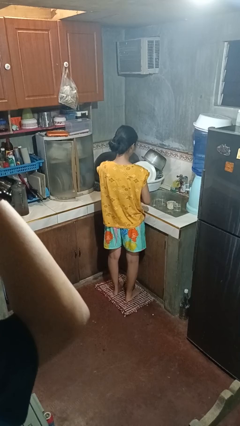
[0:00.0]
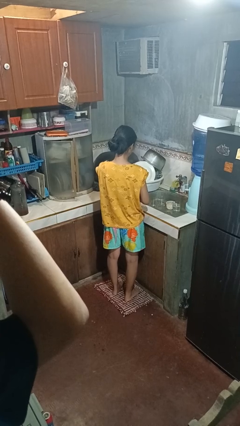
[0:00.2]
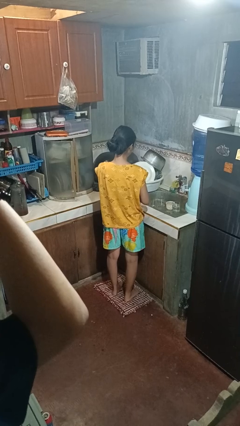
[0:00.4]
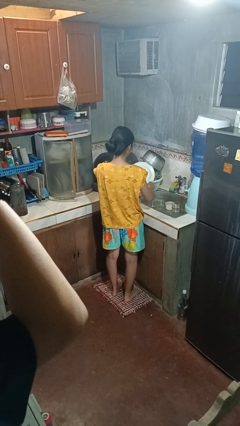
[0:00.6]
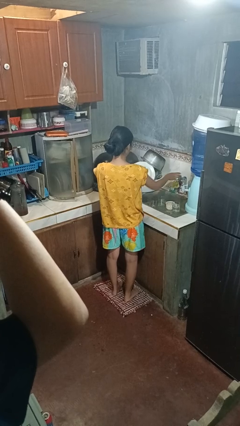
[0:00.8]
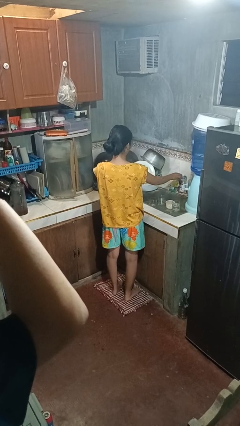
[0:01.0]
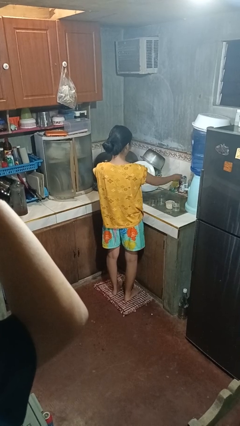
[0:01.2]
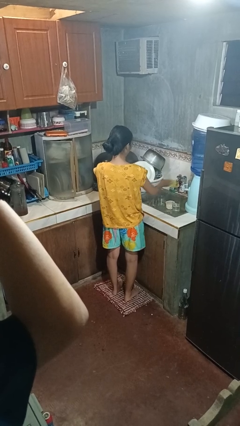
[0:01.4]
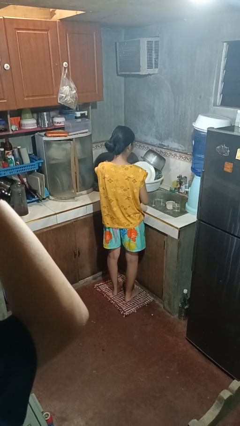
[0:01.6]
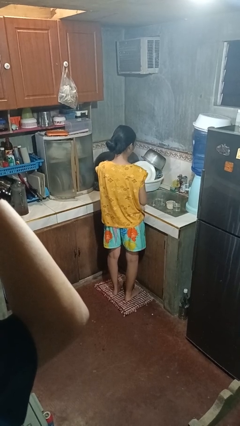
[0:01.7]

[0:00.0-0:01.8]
person turns on faucet

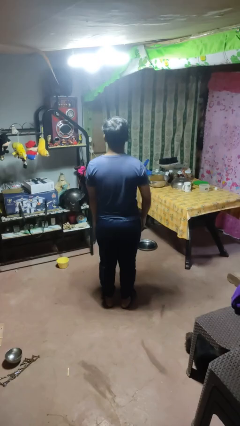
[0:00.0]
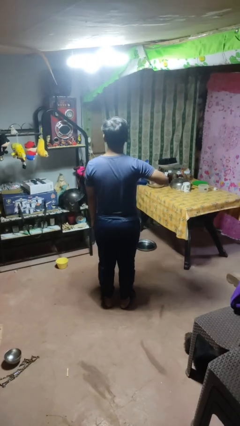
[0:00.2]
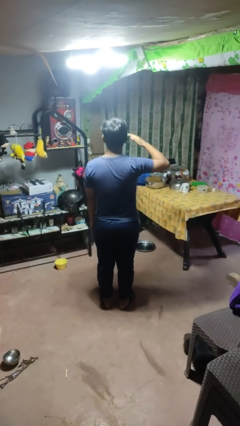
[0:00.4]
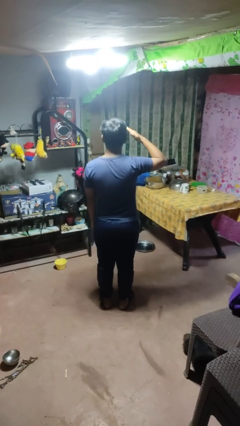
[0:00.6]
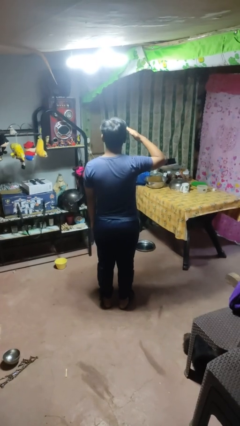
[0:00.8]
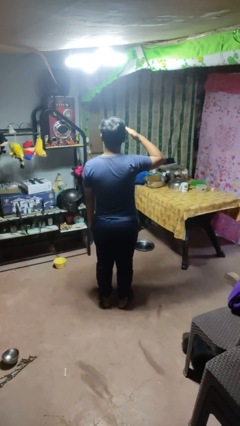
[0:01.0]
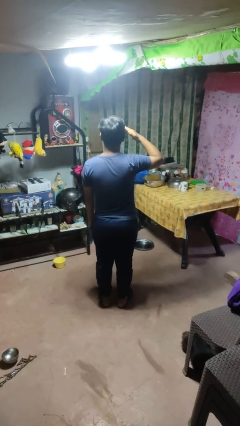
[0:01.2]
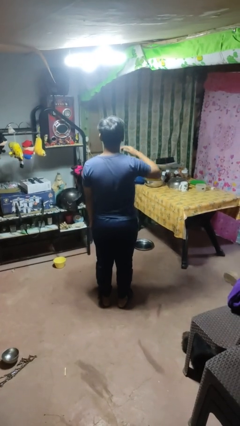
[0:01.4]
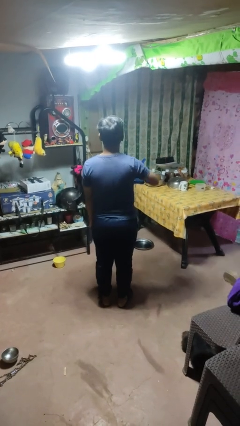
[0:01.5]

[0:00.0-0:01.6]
person salutes

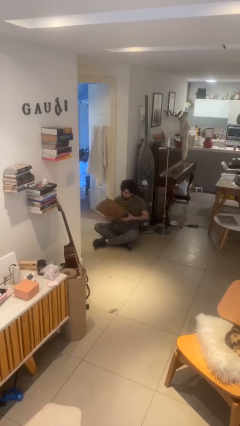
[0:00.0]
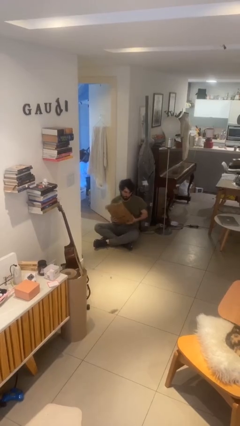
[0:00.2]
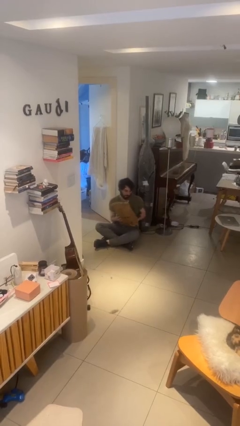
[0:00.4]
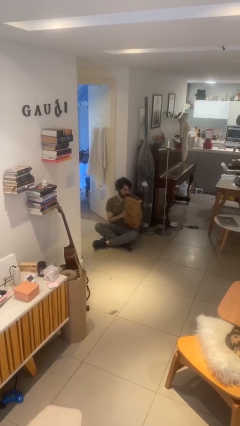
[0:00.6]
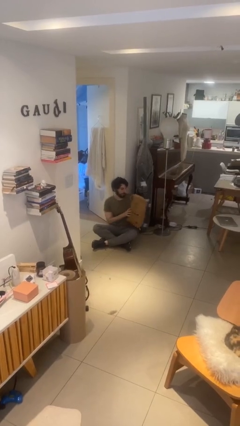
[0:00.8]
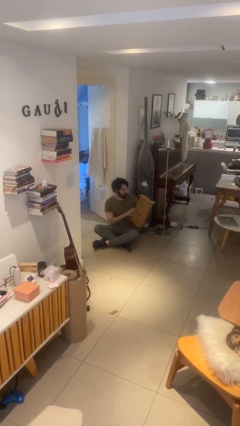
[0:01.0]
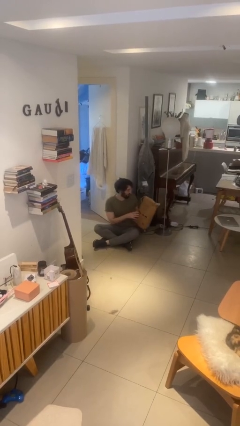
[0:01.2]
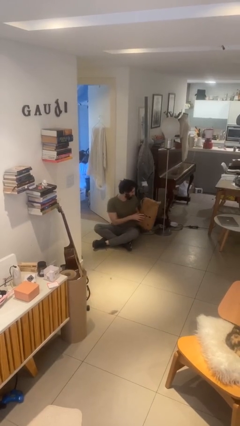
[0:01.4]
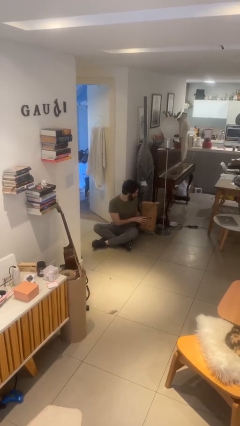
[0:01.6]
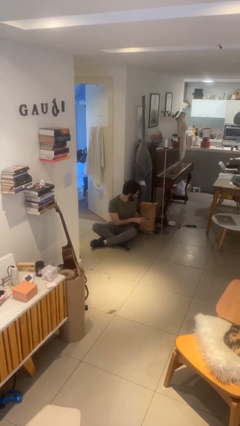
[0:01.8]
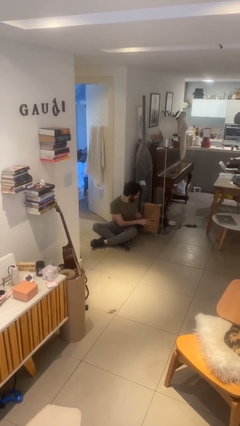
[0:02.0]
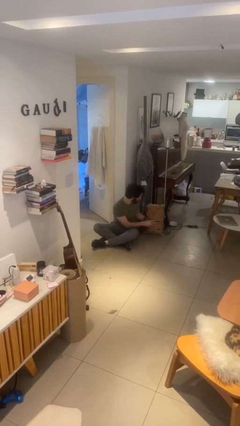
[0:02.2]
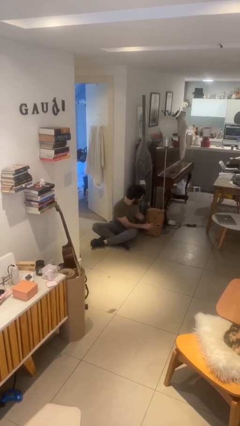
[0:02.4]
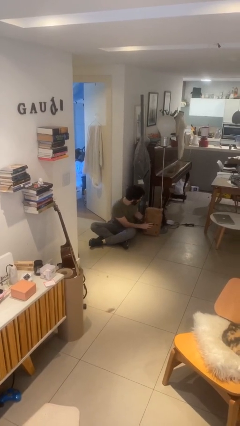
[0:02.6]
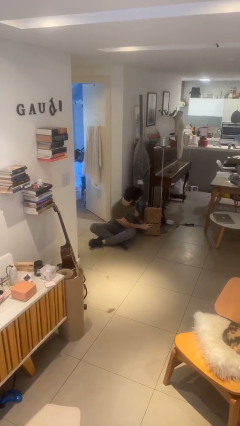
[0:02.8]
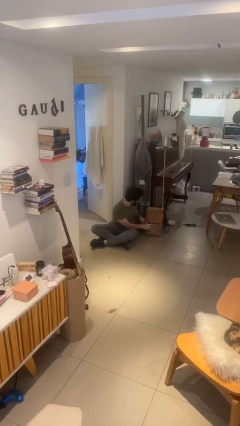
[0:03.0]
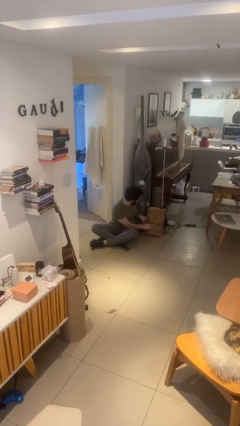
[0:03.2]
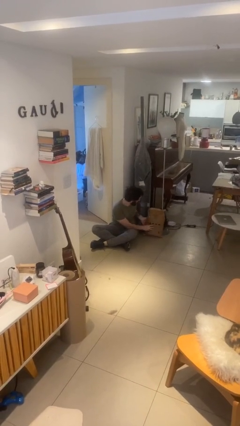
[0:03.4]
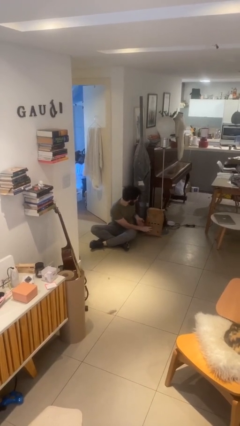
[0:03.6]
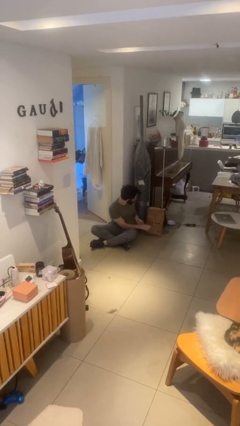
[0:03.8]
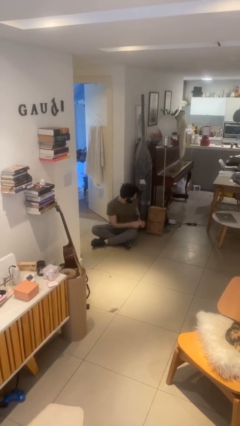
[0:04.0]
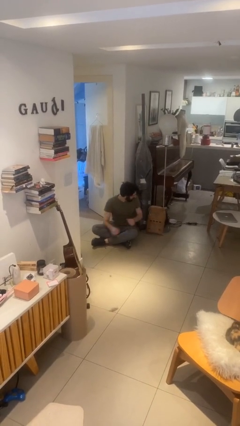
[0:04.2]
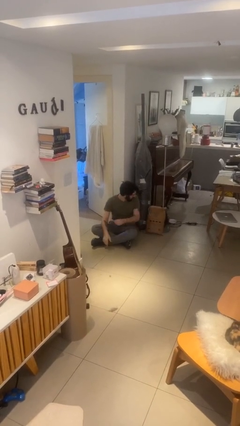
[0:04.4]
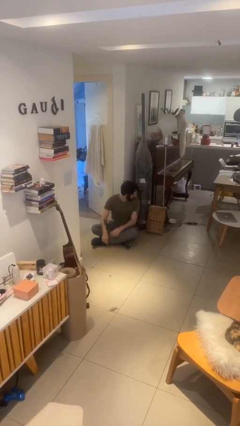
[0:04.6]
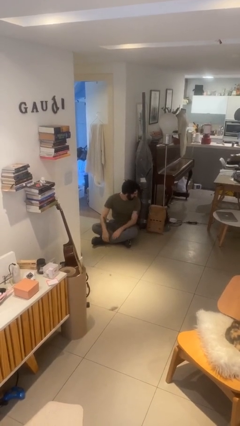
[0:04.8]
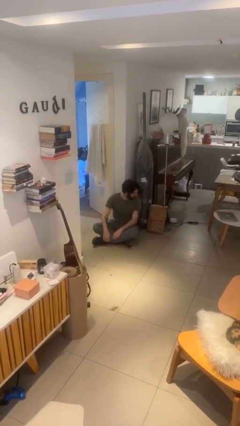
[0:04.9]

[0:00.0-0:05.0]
person puts down object on floor

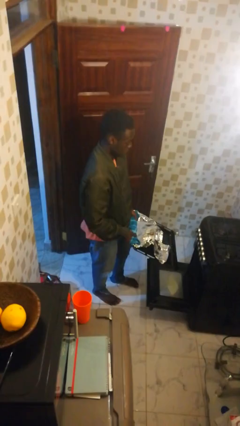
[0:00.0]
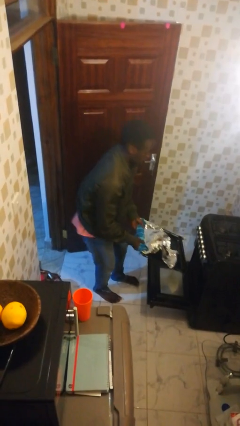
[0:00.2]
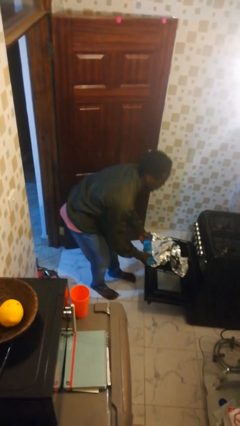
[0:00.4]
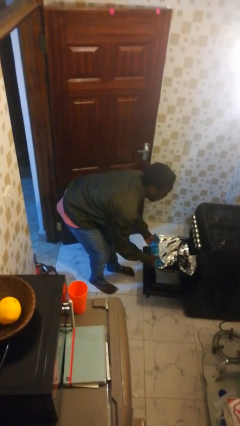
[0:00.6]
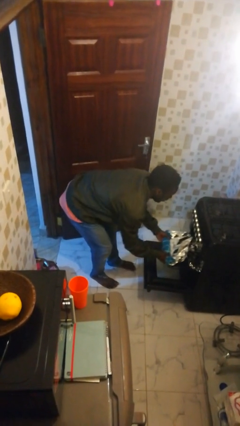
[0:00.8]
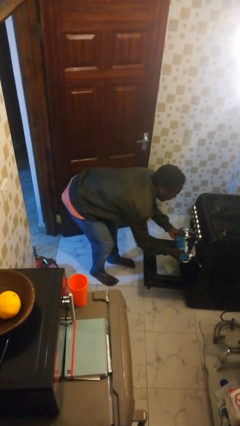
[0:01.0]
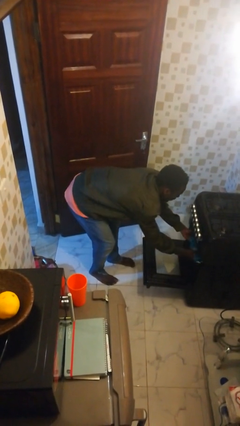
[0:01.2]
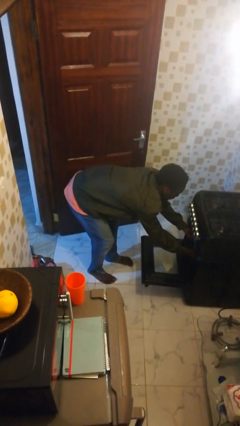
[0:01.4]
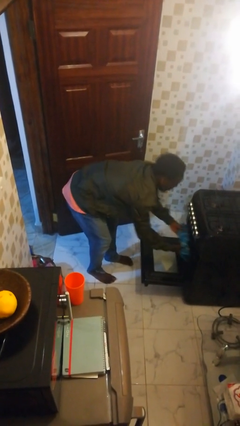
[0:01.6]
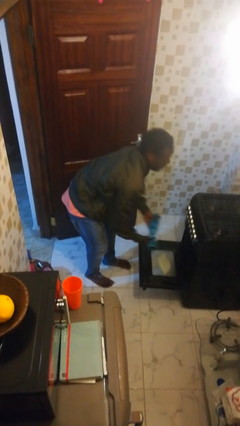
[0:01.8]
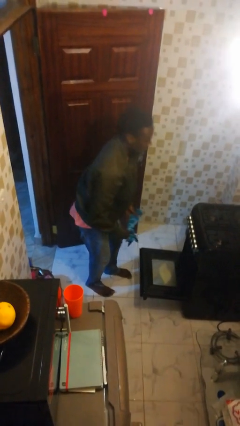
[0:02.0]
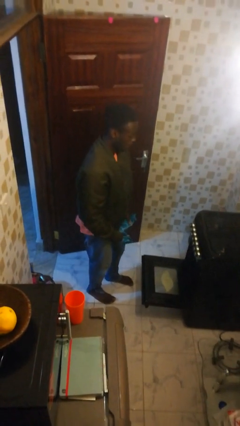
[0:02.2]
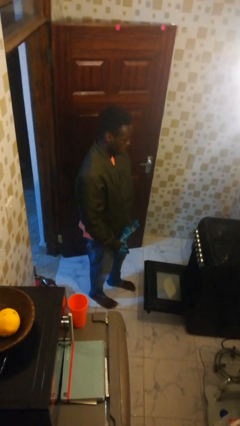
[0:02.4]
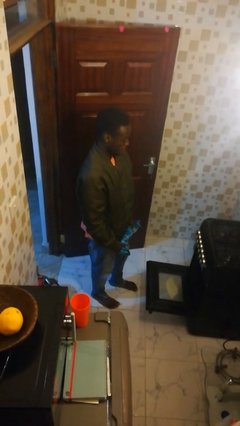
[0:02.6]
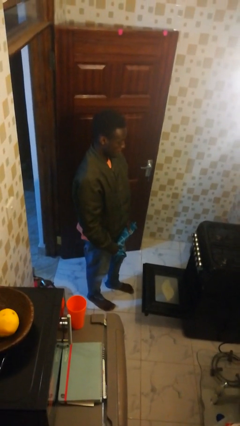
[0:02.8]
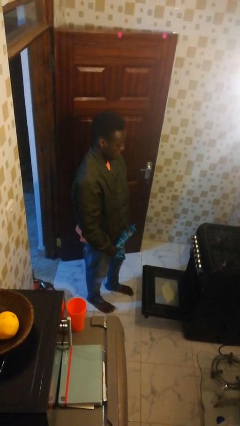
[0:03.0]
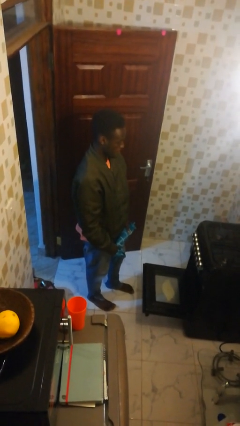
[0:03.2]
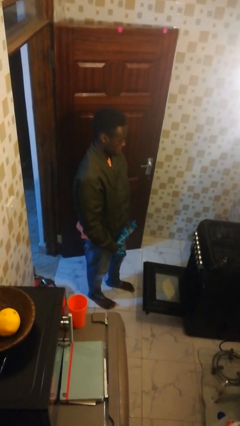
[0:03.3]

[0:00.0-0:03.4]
person puts object into oven

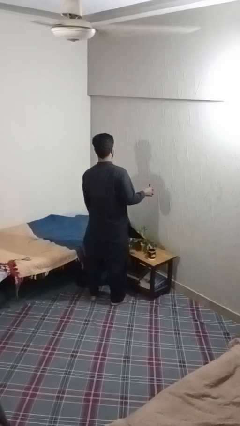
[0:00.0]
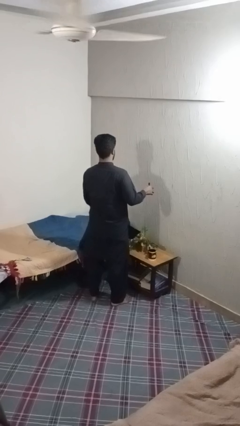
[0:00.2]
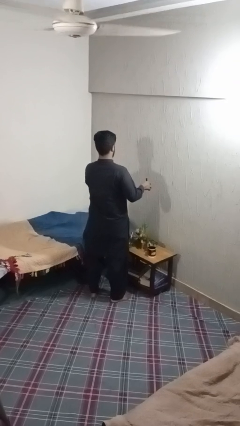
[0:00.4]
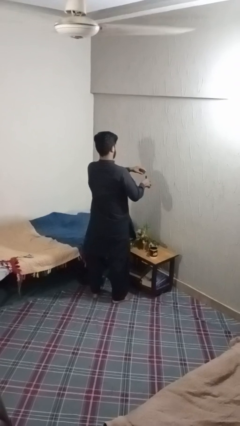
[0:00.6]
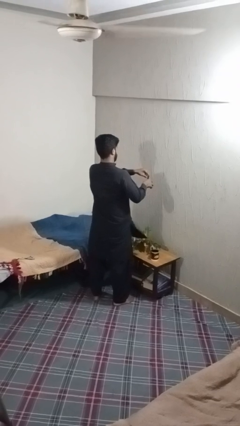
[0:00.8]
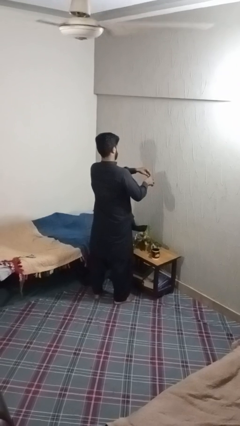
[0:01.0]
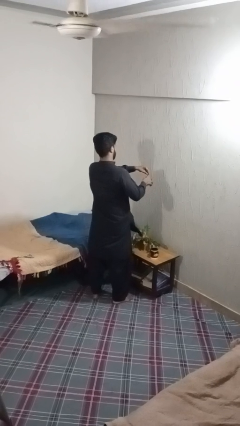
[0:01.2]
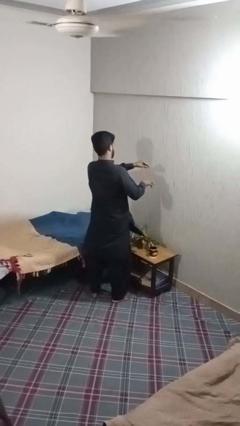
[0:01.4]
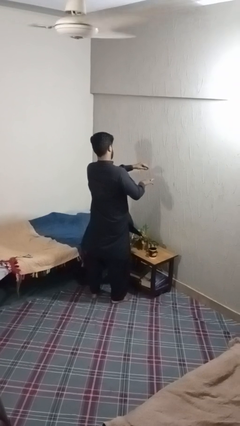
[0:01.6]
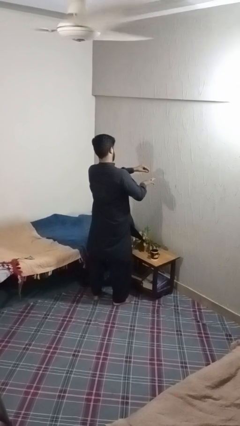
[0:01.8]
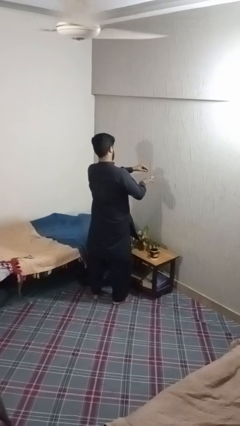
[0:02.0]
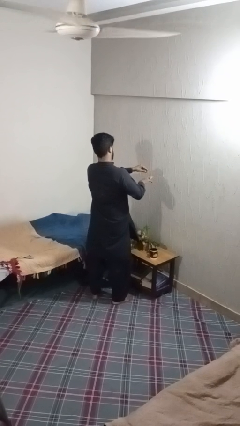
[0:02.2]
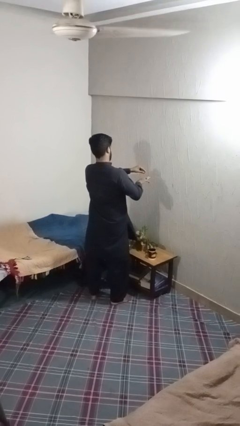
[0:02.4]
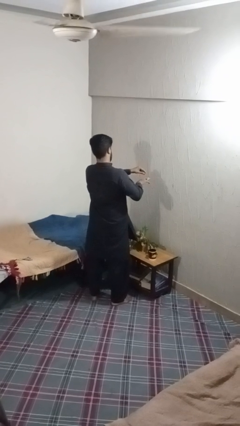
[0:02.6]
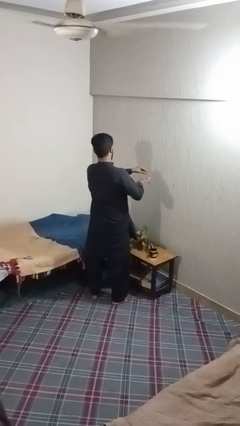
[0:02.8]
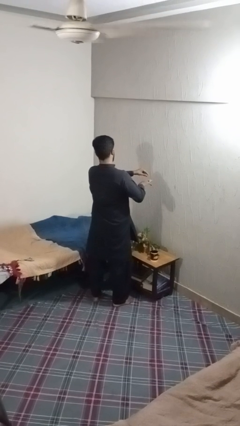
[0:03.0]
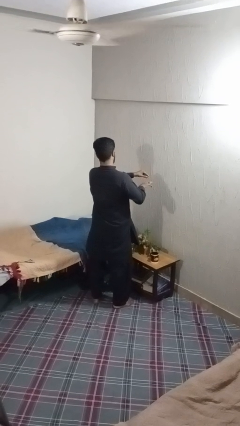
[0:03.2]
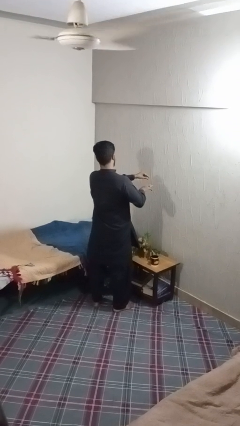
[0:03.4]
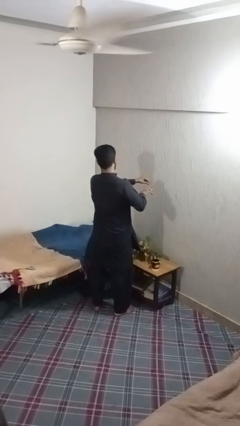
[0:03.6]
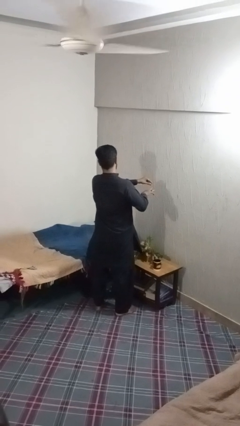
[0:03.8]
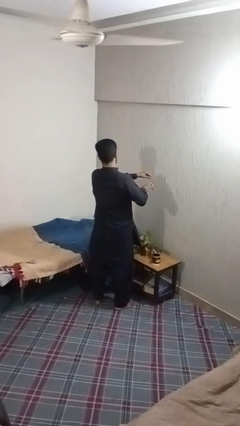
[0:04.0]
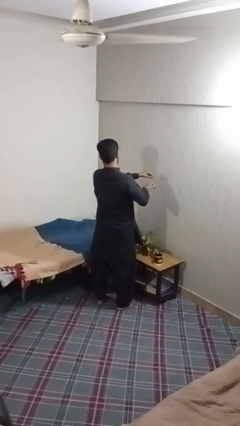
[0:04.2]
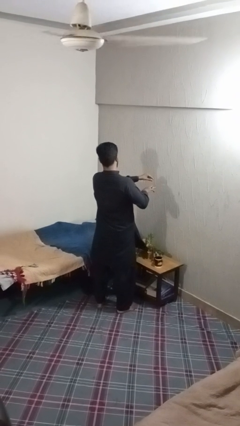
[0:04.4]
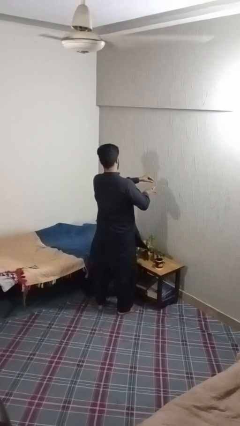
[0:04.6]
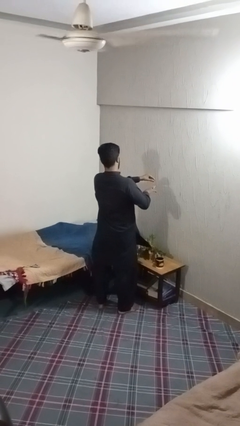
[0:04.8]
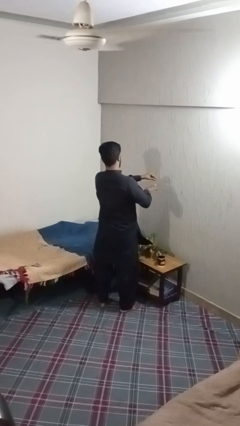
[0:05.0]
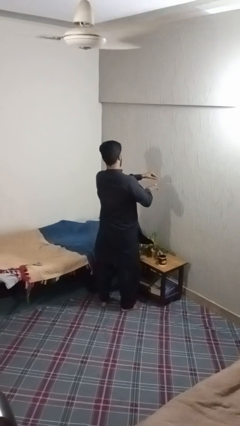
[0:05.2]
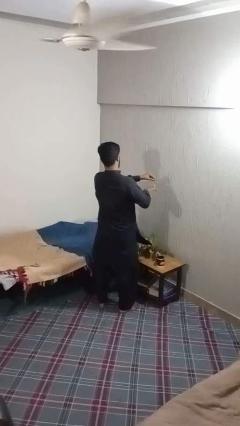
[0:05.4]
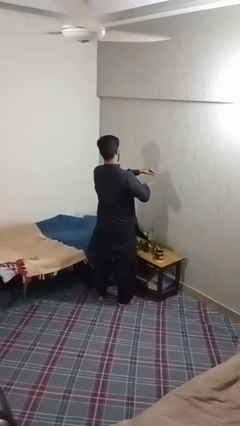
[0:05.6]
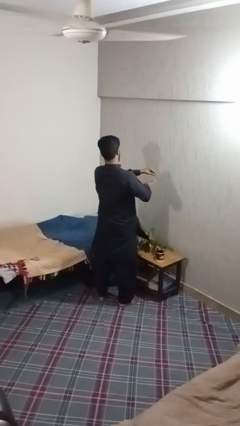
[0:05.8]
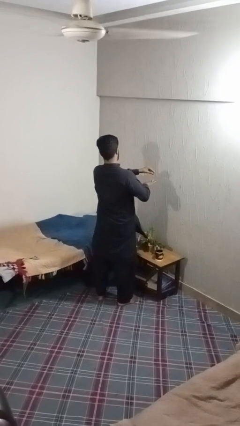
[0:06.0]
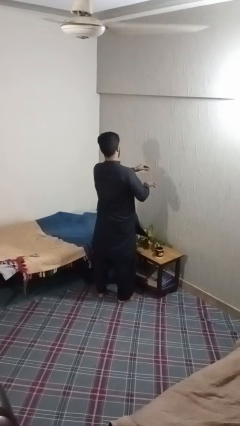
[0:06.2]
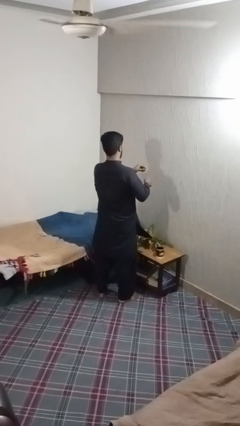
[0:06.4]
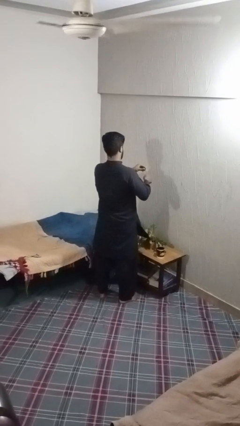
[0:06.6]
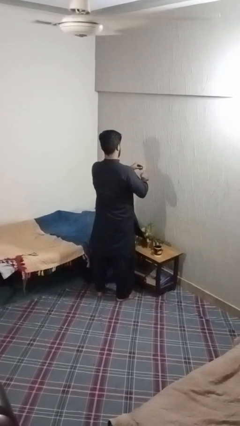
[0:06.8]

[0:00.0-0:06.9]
person paints fingernails
